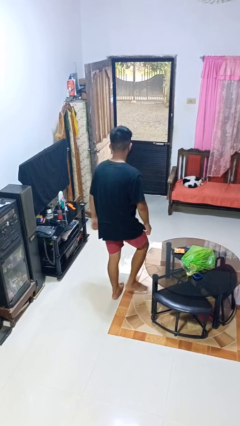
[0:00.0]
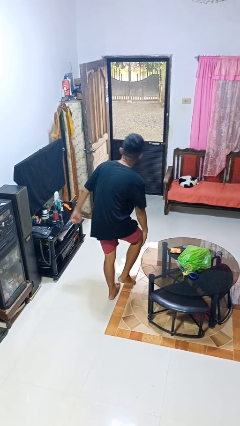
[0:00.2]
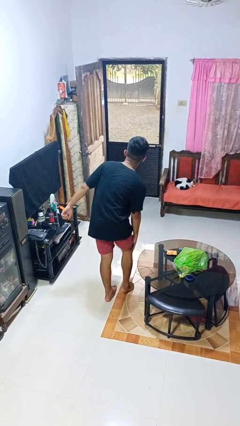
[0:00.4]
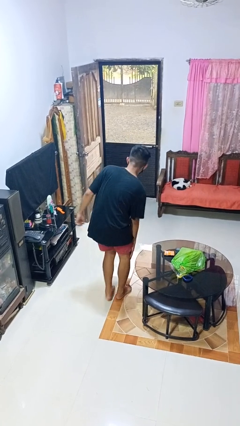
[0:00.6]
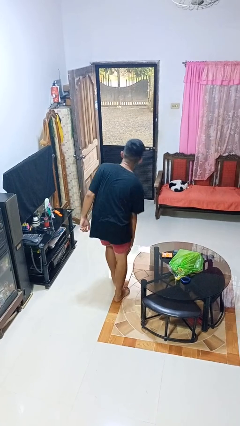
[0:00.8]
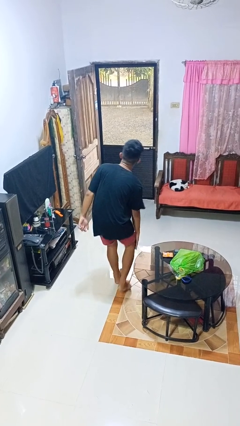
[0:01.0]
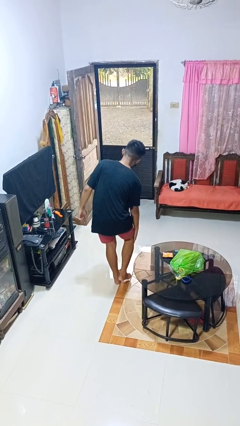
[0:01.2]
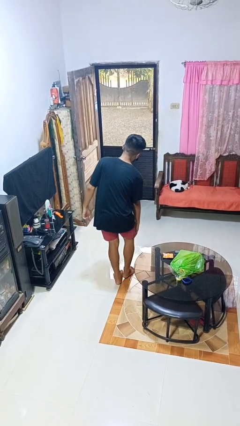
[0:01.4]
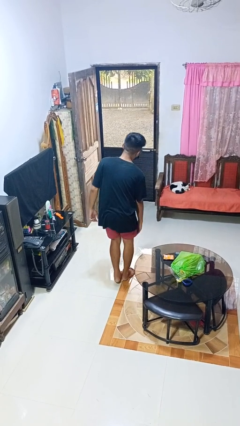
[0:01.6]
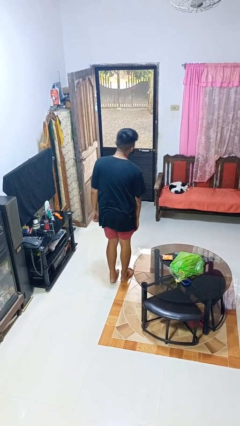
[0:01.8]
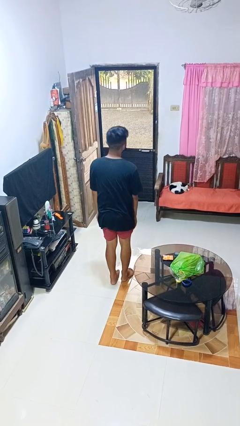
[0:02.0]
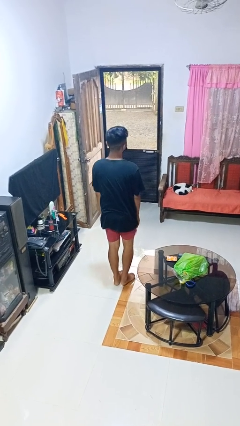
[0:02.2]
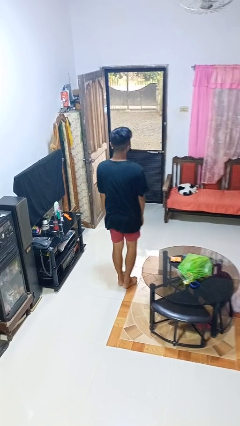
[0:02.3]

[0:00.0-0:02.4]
person bumps into table

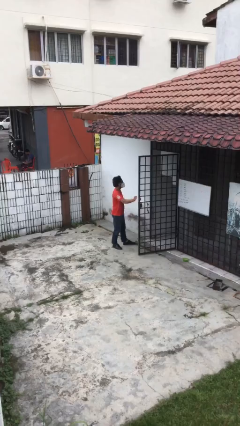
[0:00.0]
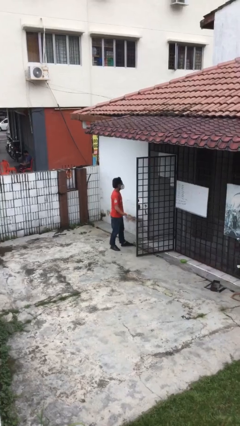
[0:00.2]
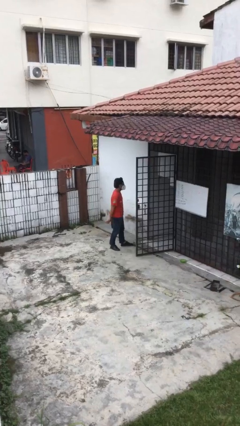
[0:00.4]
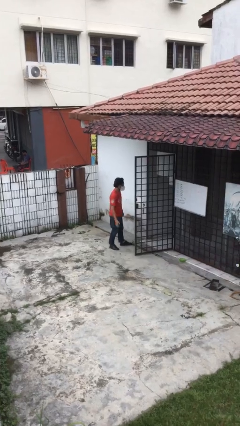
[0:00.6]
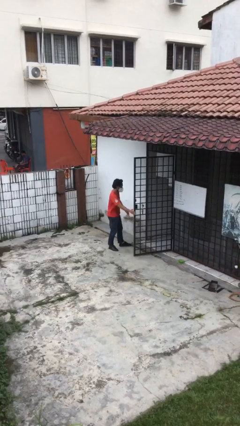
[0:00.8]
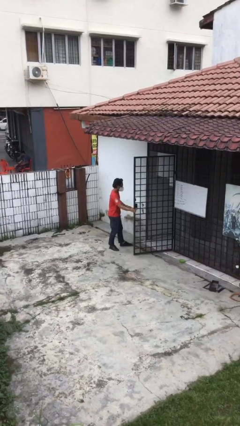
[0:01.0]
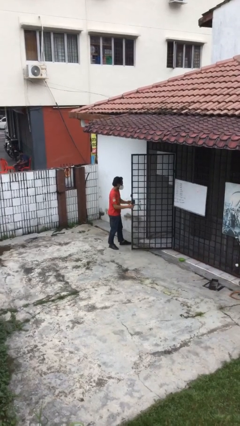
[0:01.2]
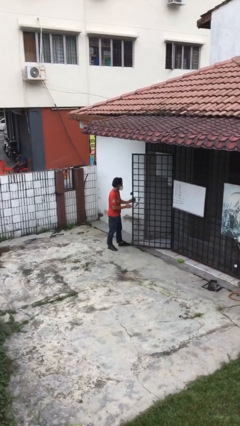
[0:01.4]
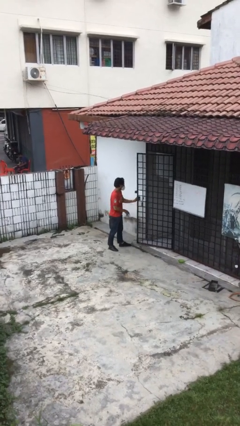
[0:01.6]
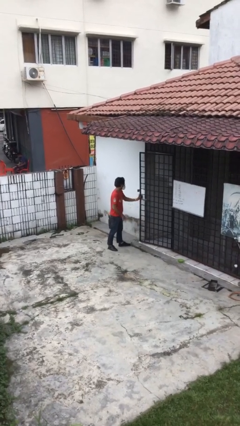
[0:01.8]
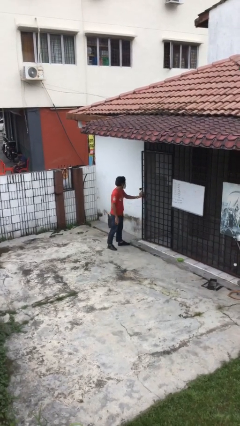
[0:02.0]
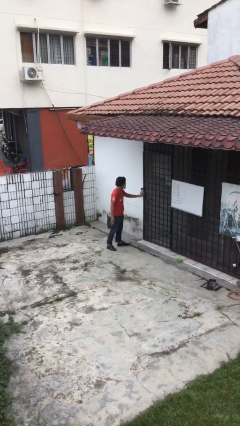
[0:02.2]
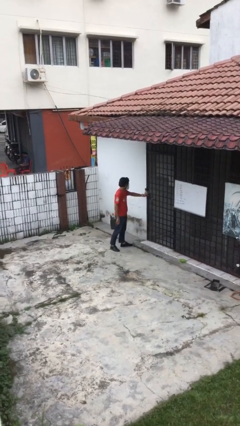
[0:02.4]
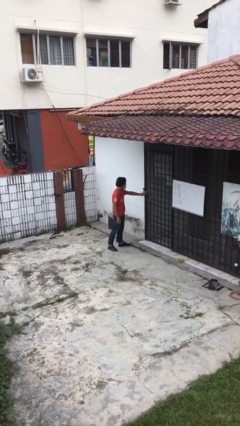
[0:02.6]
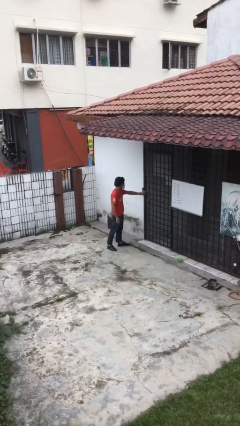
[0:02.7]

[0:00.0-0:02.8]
person closes facility door

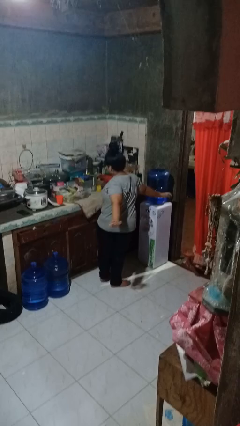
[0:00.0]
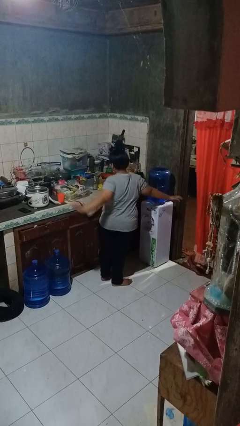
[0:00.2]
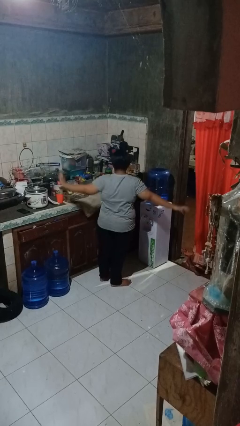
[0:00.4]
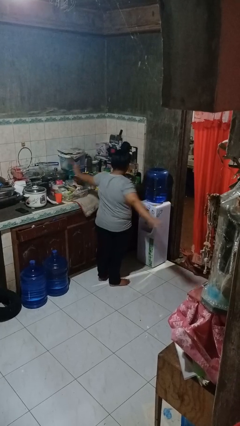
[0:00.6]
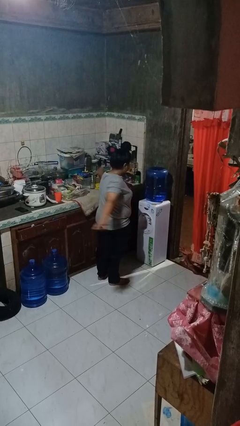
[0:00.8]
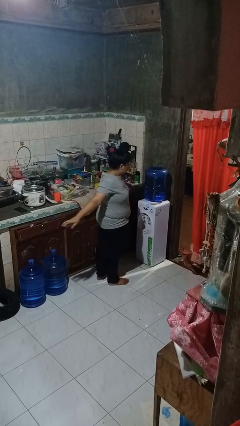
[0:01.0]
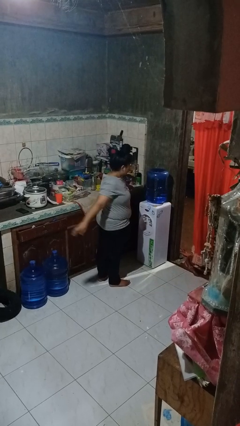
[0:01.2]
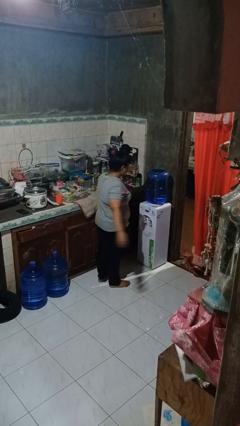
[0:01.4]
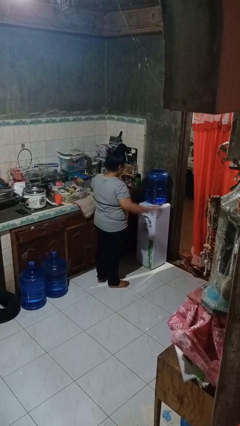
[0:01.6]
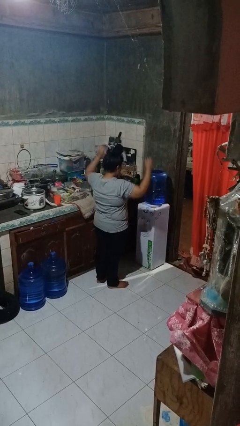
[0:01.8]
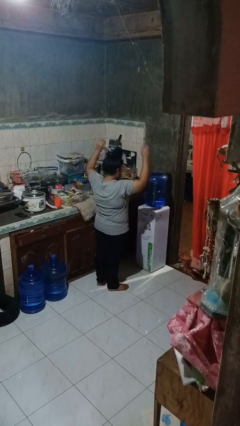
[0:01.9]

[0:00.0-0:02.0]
person stretches arms to side

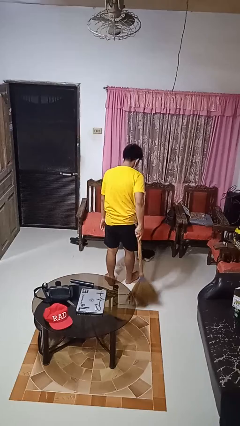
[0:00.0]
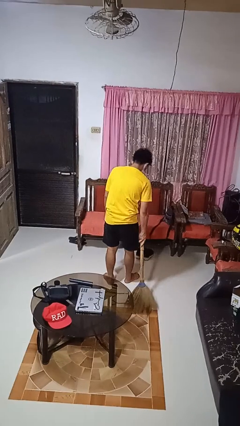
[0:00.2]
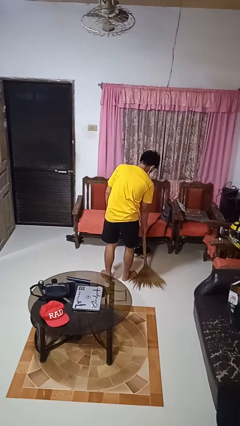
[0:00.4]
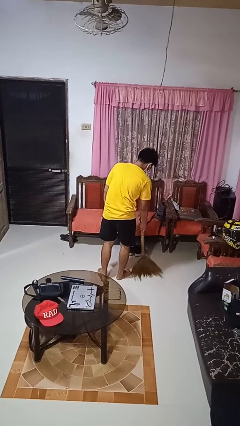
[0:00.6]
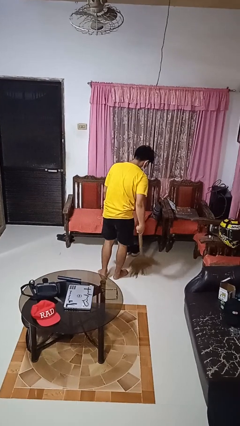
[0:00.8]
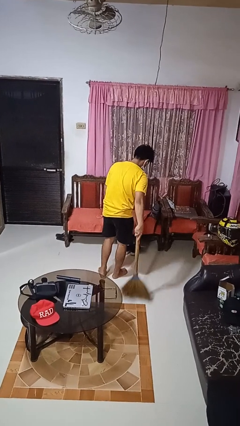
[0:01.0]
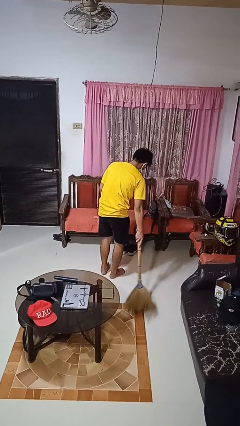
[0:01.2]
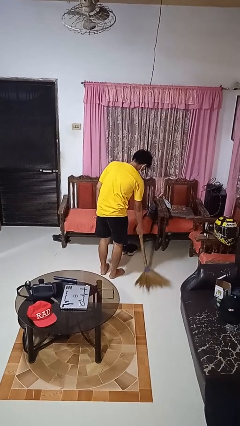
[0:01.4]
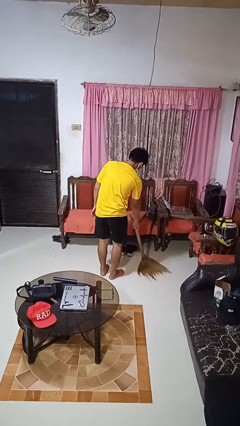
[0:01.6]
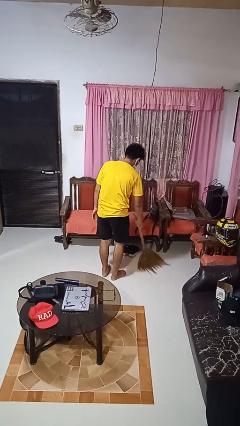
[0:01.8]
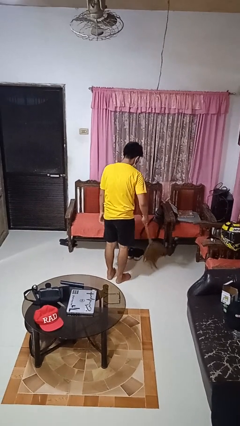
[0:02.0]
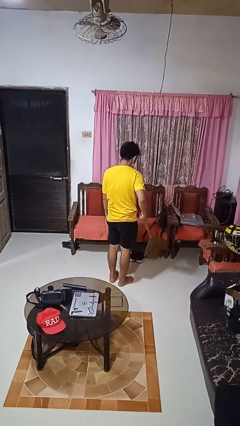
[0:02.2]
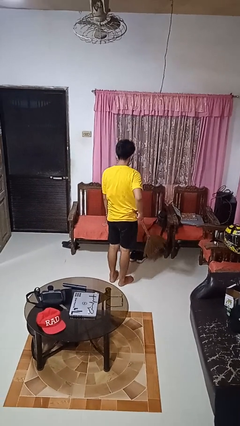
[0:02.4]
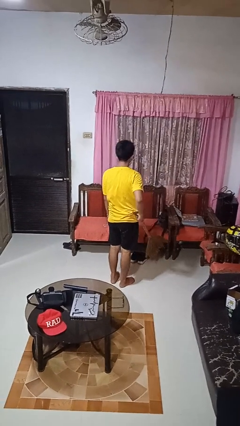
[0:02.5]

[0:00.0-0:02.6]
person sweeps floor

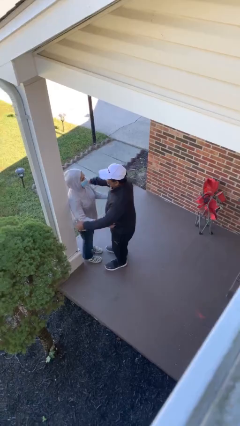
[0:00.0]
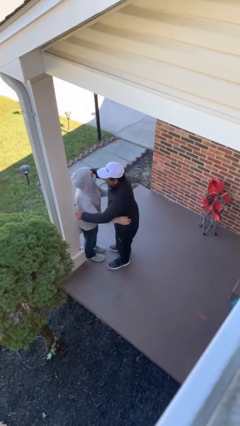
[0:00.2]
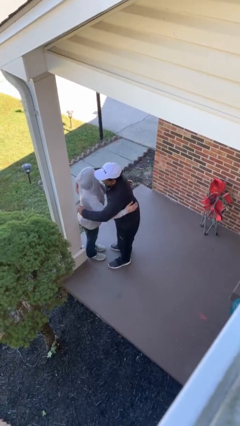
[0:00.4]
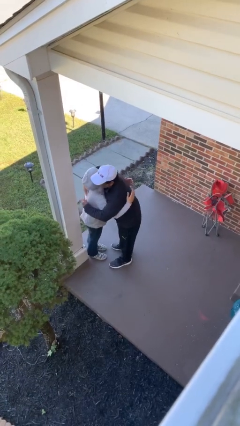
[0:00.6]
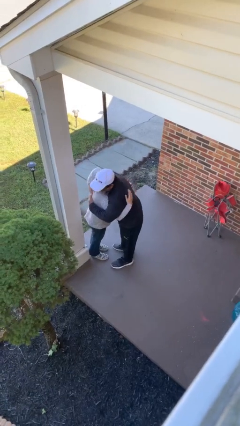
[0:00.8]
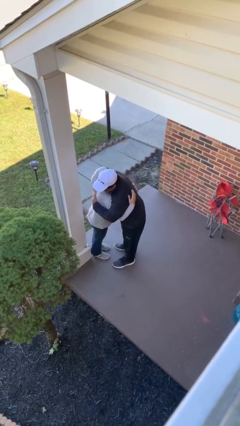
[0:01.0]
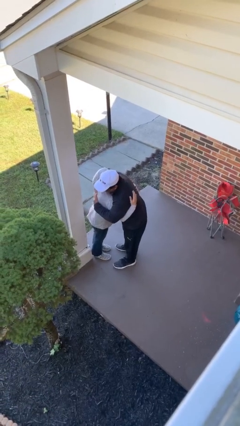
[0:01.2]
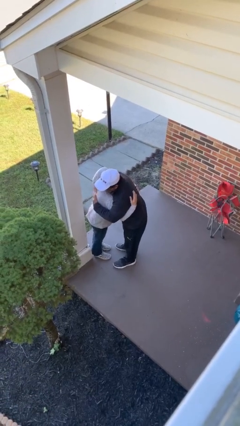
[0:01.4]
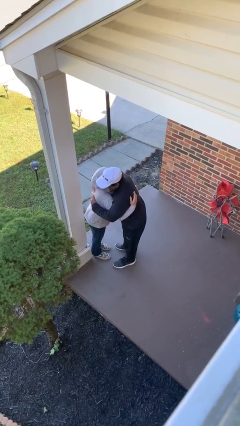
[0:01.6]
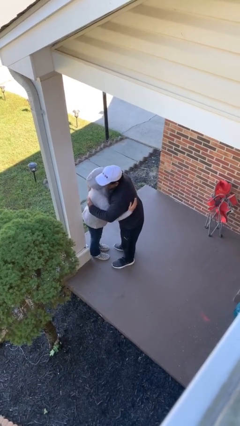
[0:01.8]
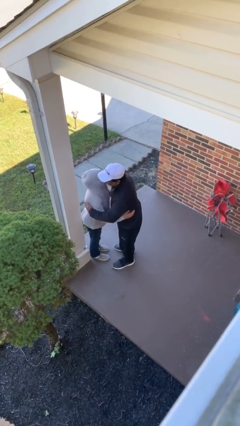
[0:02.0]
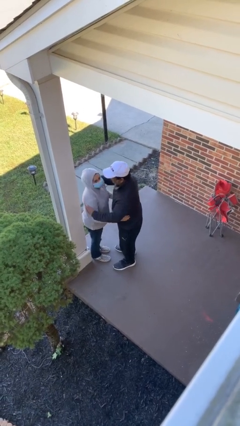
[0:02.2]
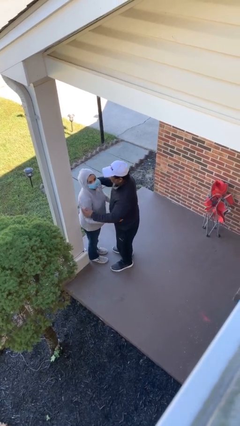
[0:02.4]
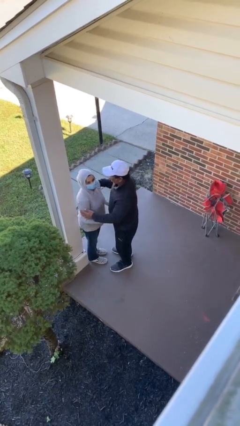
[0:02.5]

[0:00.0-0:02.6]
person embraces person

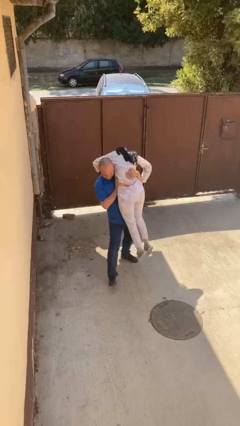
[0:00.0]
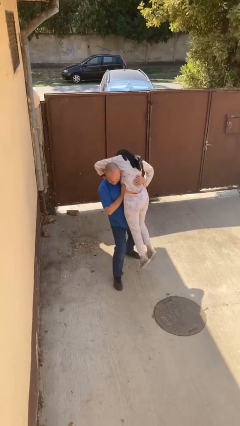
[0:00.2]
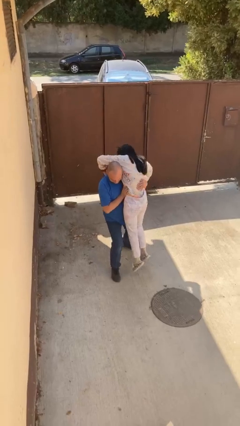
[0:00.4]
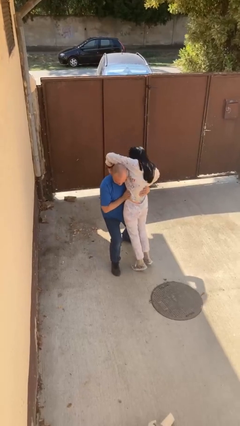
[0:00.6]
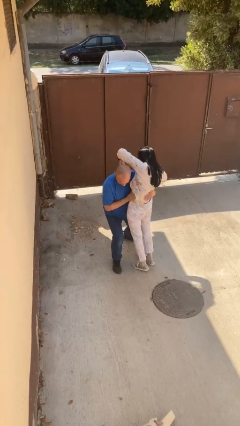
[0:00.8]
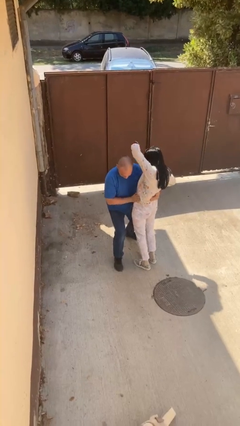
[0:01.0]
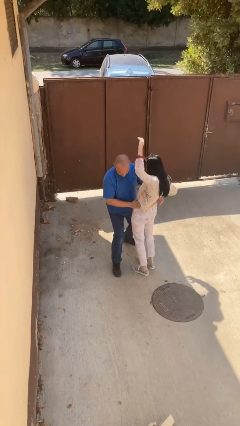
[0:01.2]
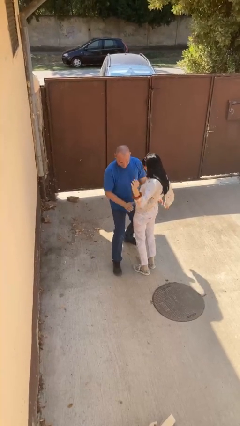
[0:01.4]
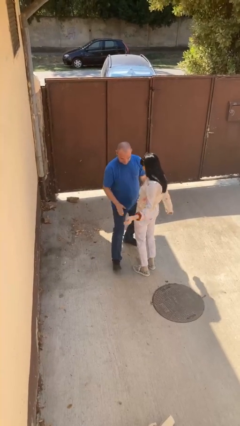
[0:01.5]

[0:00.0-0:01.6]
person puts down person

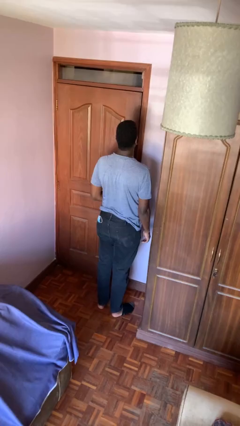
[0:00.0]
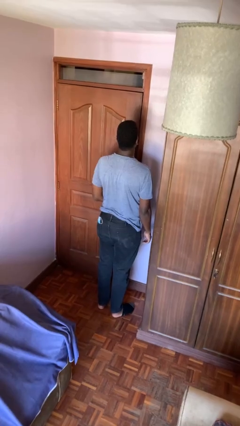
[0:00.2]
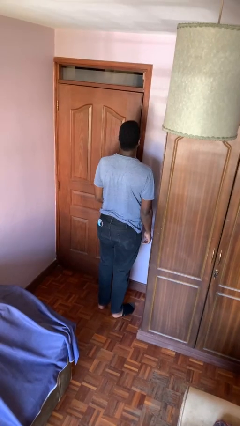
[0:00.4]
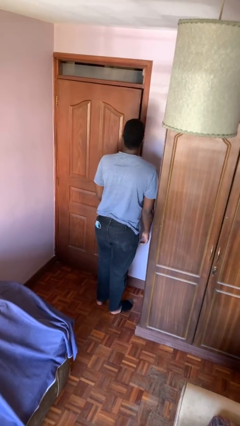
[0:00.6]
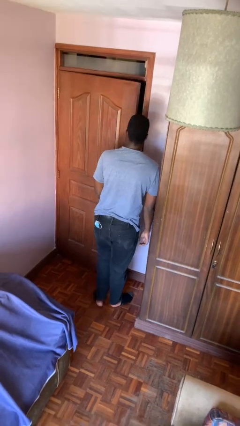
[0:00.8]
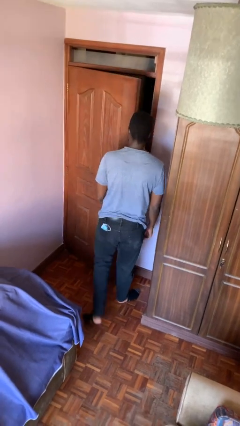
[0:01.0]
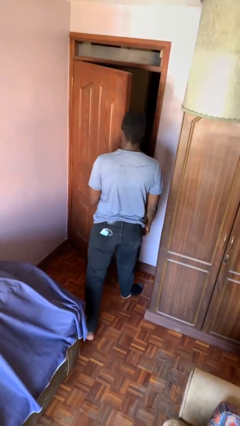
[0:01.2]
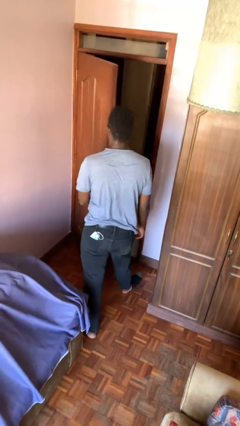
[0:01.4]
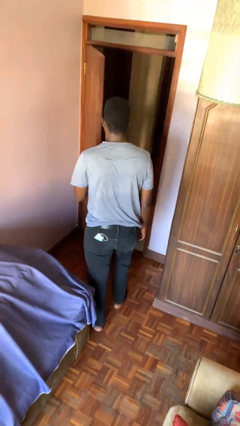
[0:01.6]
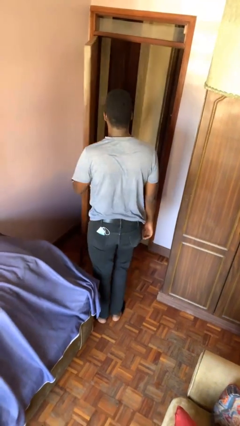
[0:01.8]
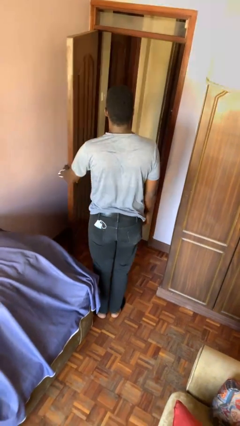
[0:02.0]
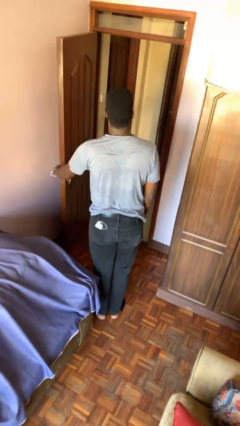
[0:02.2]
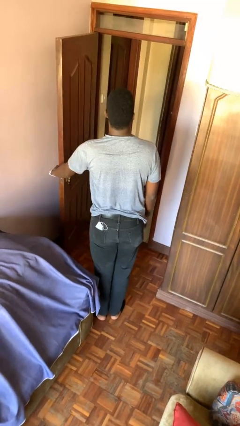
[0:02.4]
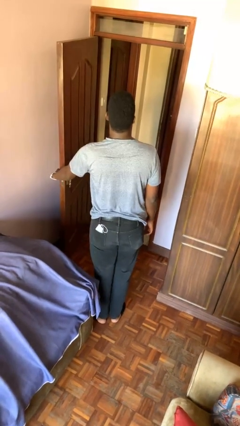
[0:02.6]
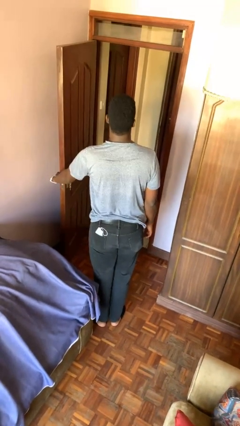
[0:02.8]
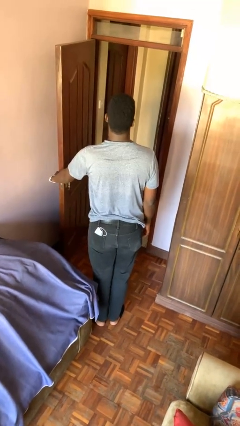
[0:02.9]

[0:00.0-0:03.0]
person opens facility door
